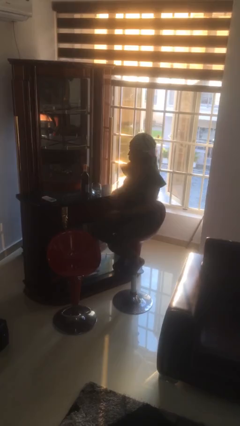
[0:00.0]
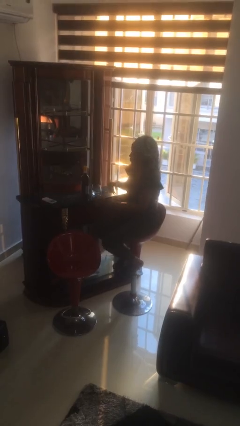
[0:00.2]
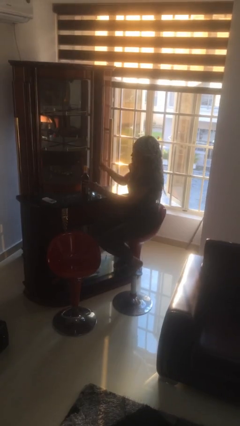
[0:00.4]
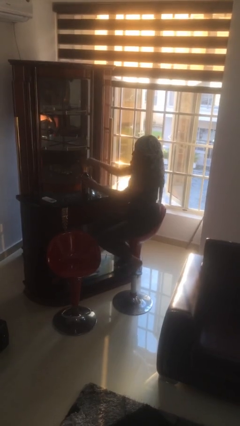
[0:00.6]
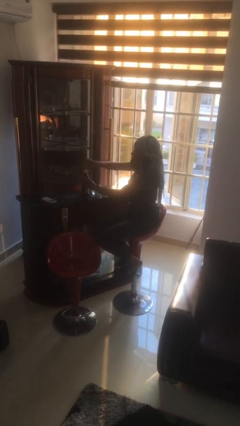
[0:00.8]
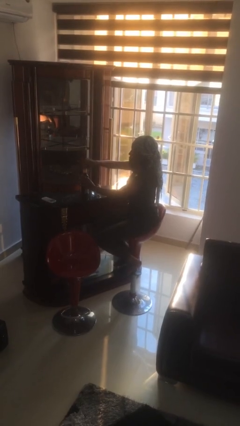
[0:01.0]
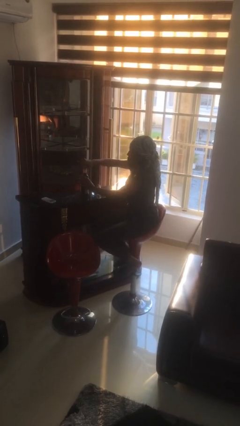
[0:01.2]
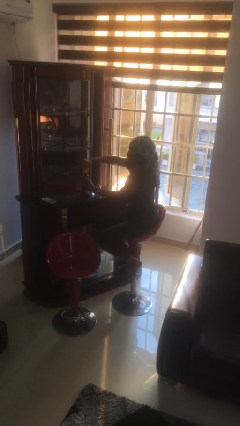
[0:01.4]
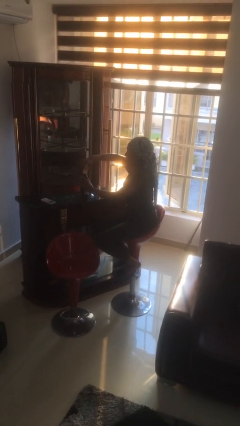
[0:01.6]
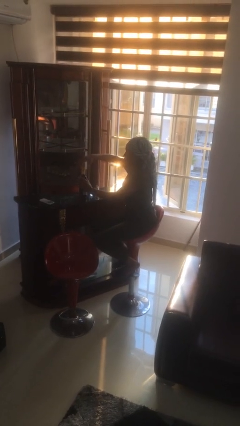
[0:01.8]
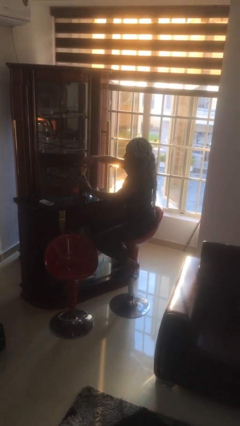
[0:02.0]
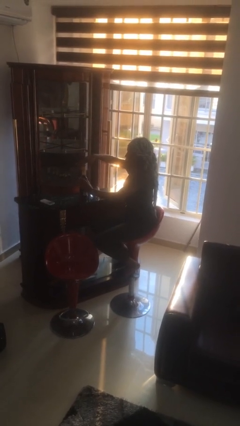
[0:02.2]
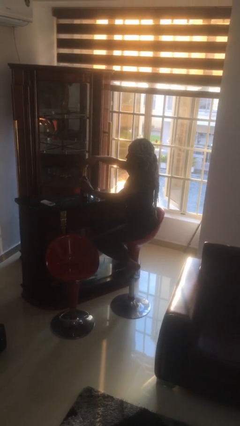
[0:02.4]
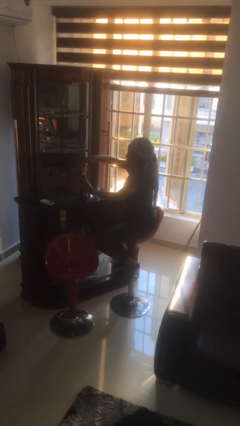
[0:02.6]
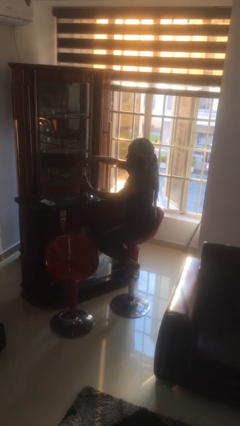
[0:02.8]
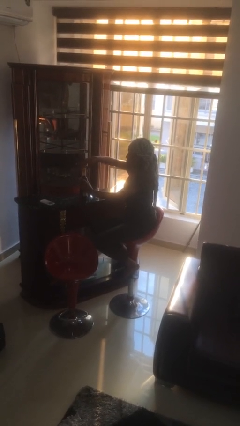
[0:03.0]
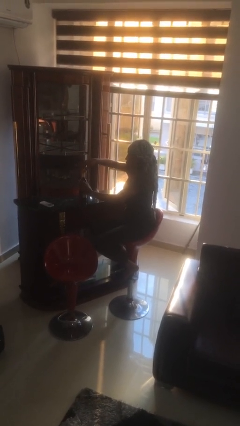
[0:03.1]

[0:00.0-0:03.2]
person unscrews lid from bottle

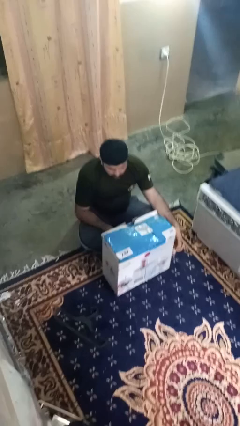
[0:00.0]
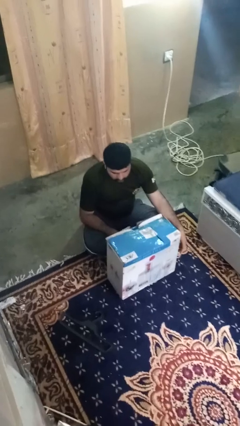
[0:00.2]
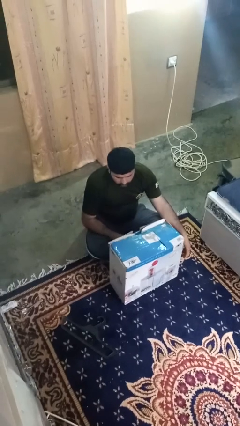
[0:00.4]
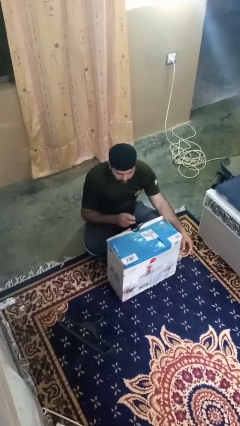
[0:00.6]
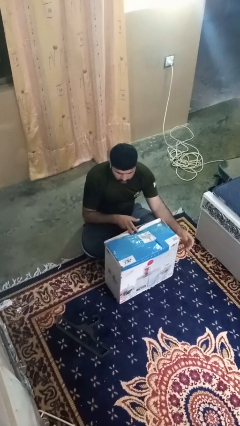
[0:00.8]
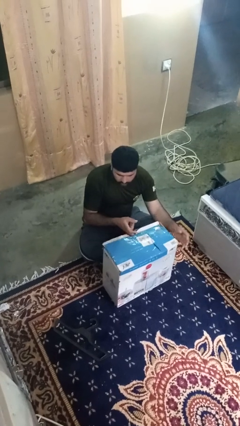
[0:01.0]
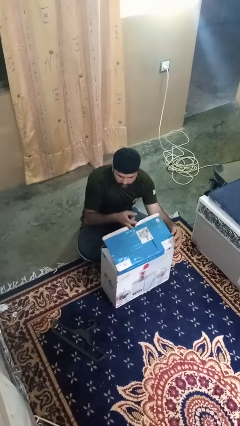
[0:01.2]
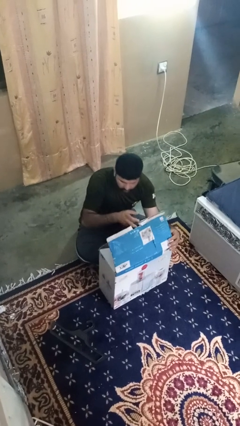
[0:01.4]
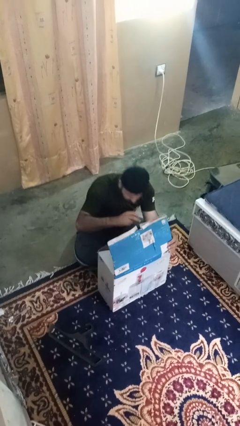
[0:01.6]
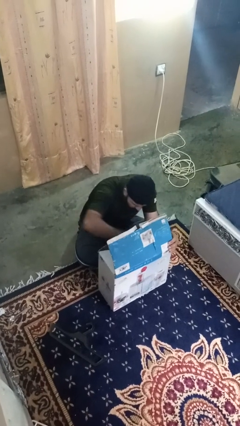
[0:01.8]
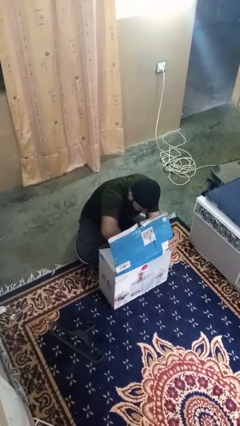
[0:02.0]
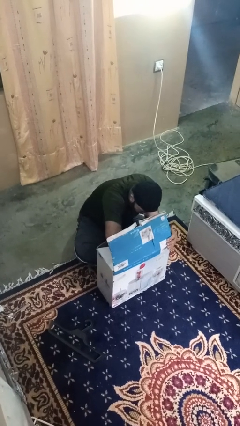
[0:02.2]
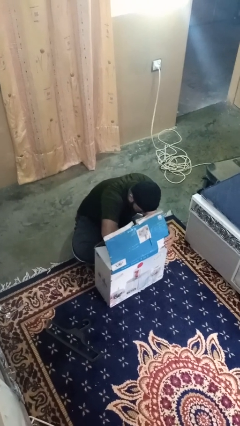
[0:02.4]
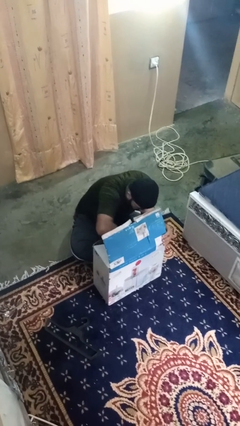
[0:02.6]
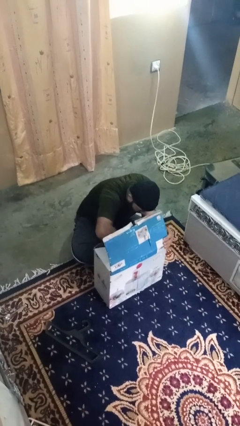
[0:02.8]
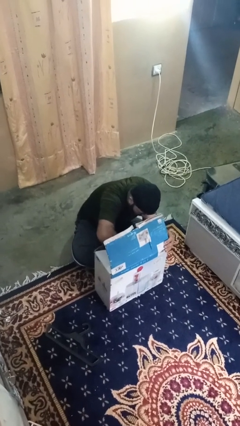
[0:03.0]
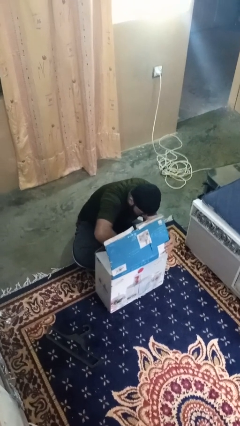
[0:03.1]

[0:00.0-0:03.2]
person searches in box

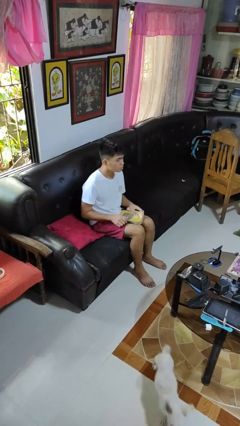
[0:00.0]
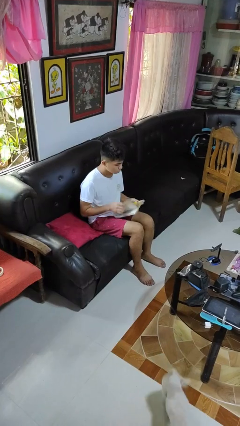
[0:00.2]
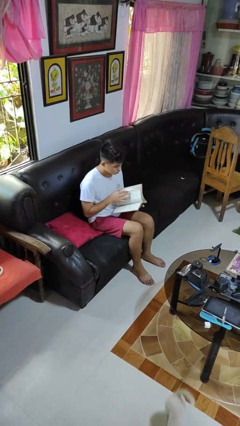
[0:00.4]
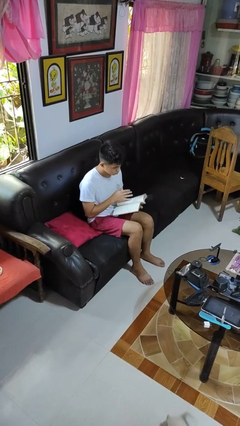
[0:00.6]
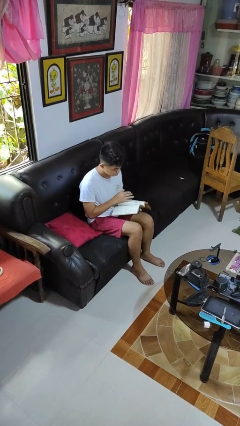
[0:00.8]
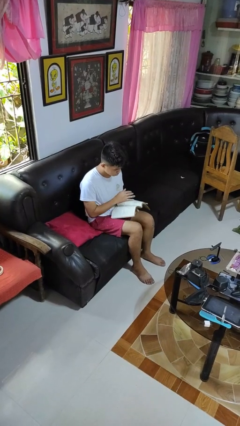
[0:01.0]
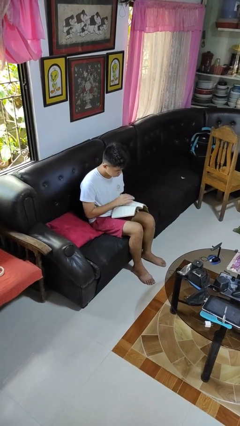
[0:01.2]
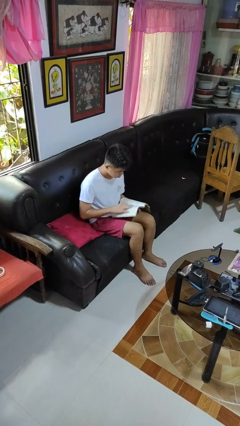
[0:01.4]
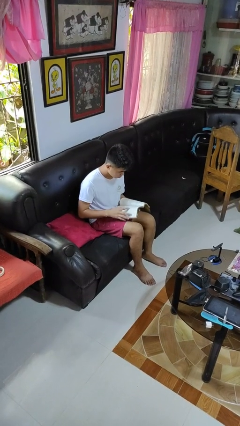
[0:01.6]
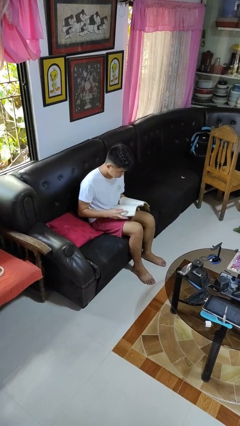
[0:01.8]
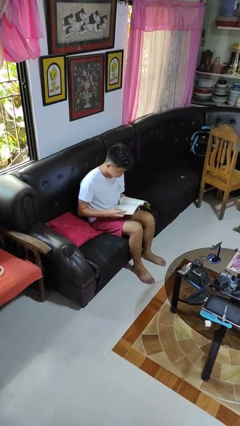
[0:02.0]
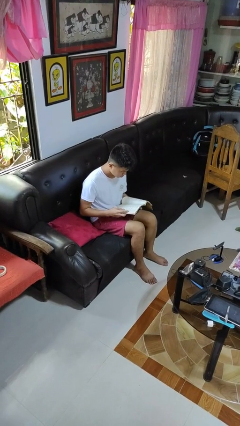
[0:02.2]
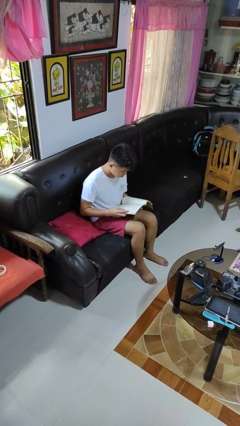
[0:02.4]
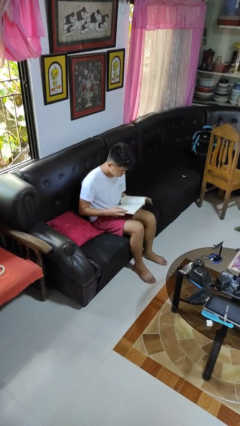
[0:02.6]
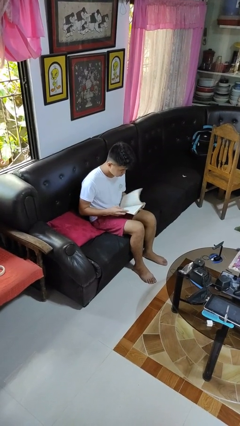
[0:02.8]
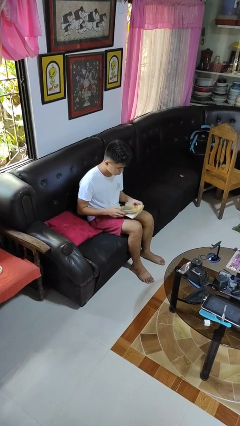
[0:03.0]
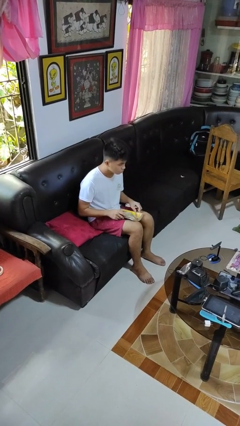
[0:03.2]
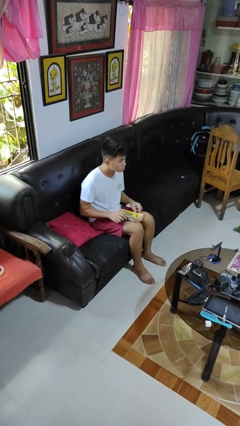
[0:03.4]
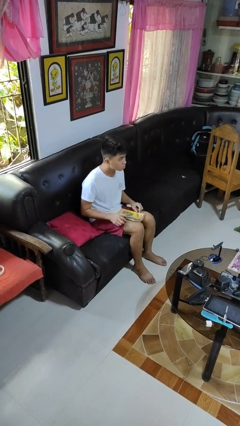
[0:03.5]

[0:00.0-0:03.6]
person reads book

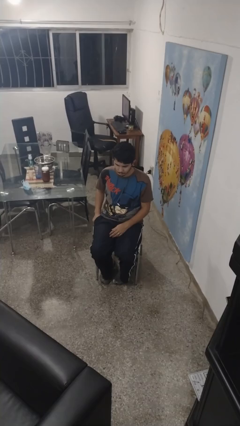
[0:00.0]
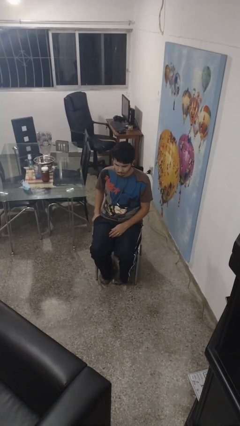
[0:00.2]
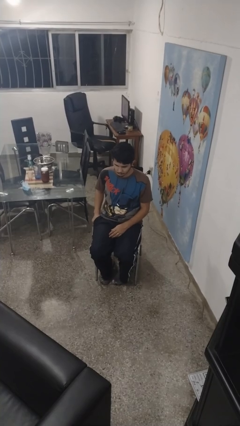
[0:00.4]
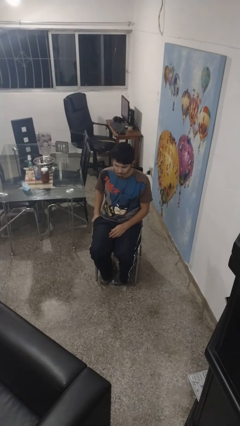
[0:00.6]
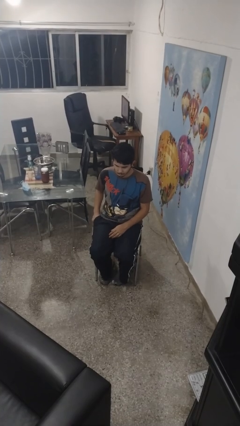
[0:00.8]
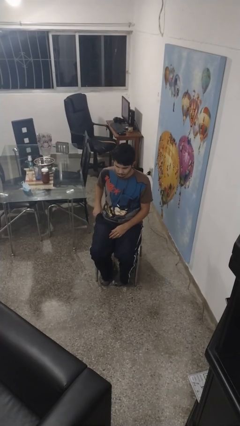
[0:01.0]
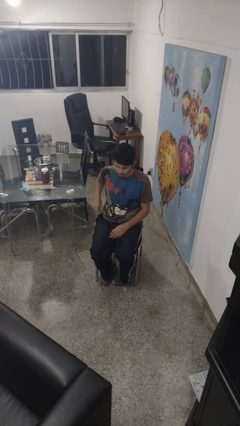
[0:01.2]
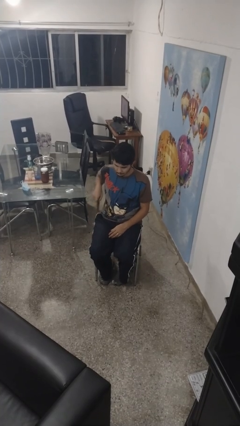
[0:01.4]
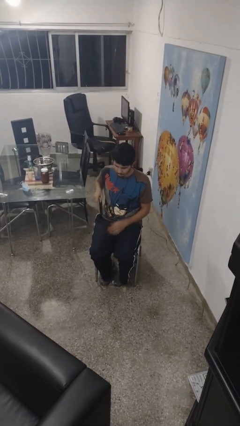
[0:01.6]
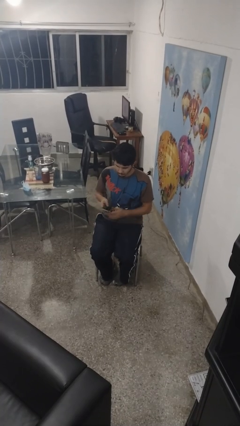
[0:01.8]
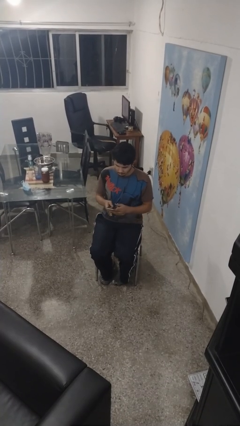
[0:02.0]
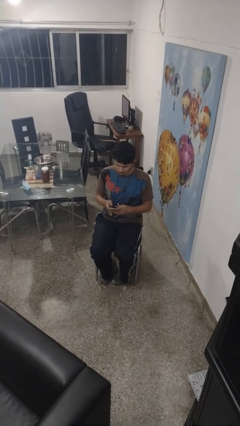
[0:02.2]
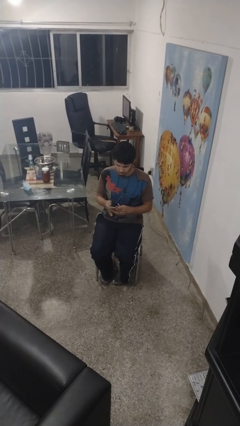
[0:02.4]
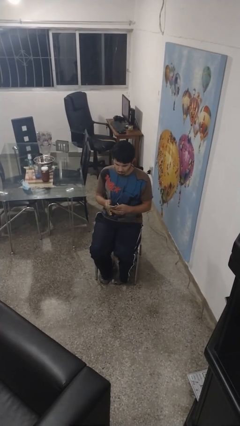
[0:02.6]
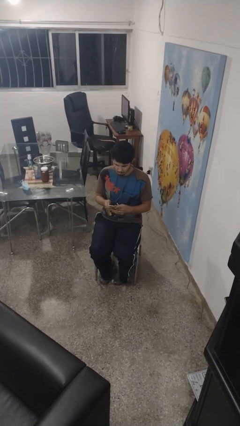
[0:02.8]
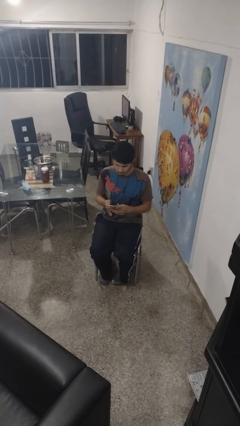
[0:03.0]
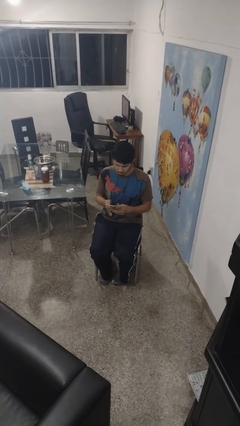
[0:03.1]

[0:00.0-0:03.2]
person takes phone from pocket

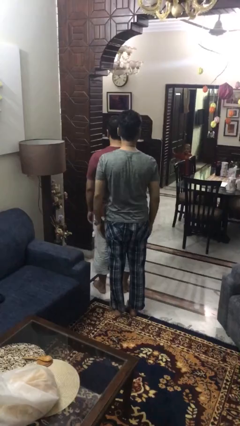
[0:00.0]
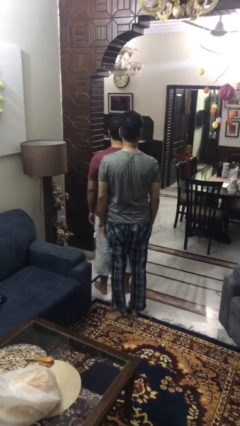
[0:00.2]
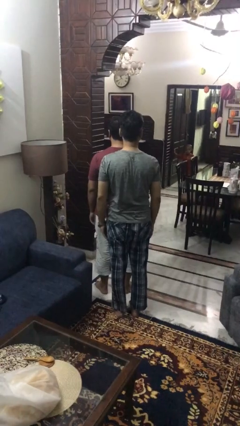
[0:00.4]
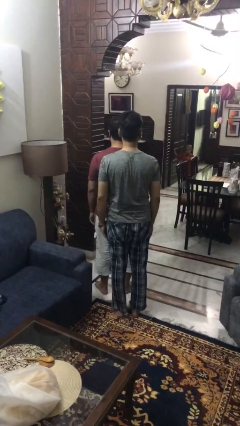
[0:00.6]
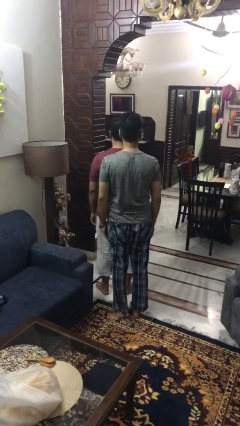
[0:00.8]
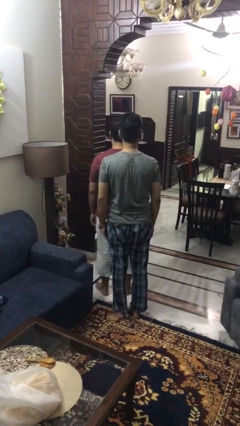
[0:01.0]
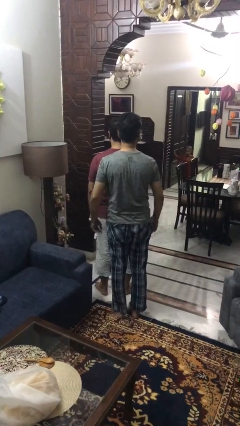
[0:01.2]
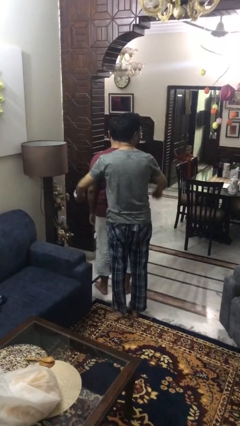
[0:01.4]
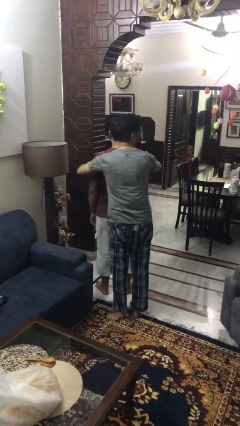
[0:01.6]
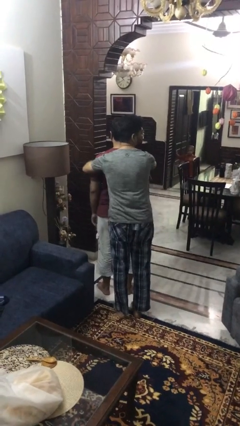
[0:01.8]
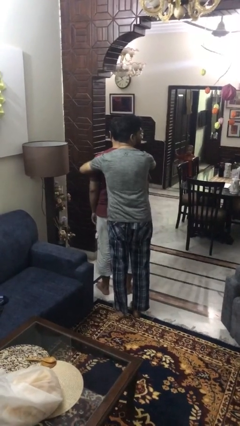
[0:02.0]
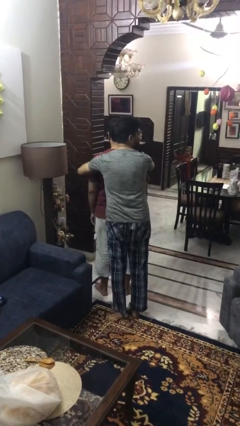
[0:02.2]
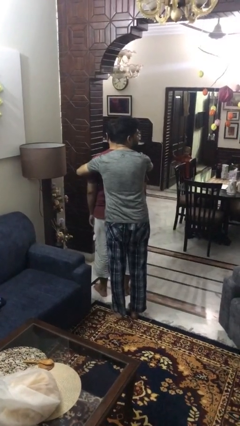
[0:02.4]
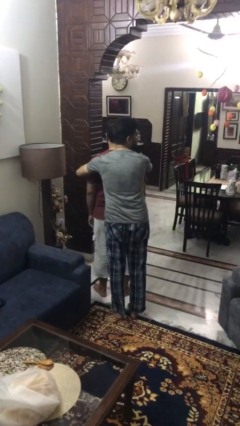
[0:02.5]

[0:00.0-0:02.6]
person hugs person from behind

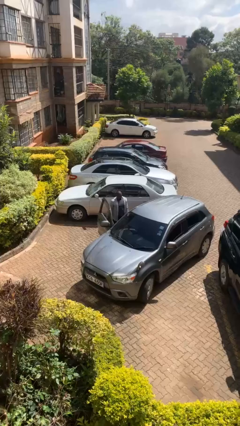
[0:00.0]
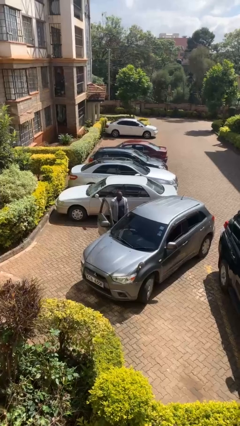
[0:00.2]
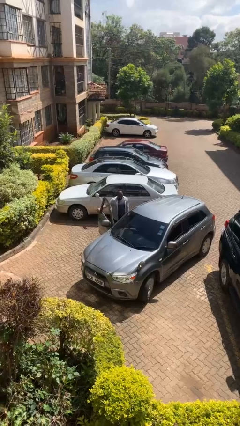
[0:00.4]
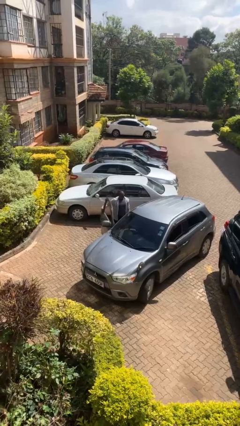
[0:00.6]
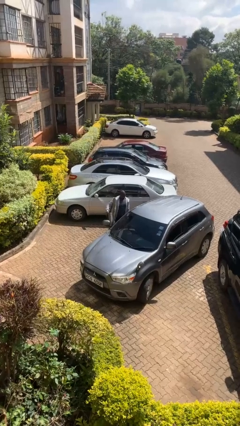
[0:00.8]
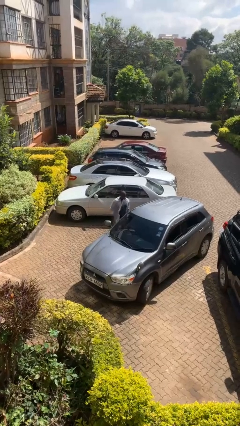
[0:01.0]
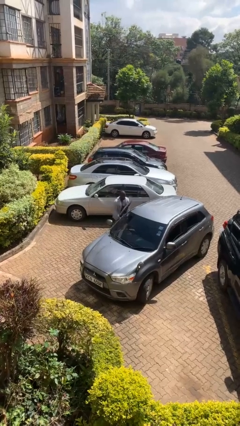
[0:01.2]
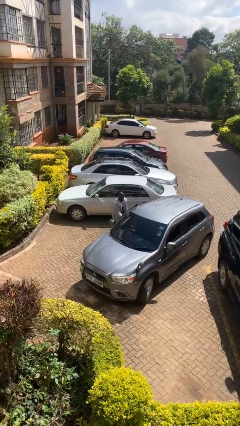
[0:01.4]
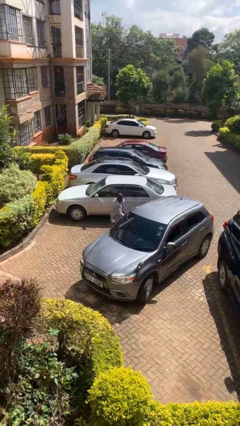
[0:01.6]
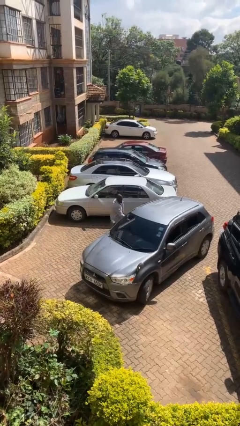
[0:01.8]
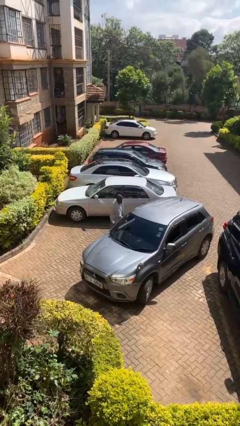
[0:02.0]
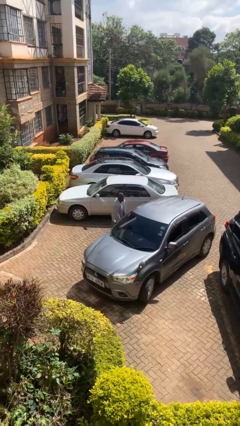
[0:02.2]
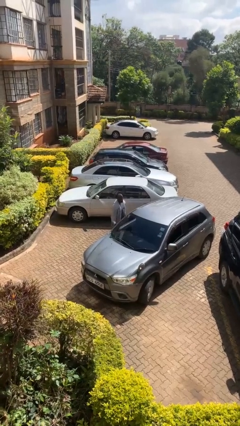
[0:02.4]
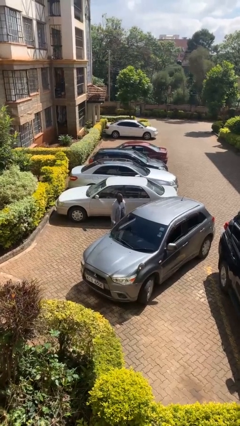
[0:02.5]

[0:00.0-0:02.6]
person closes car door
